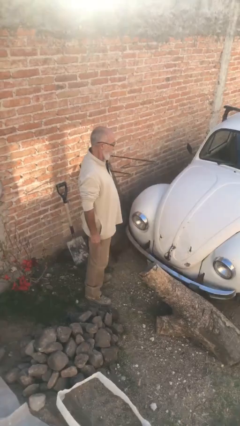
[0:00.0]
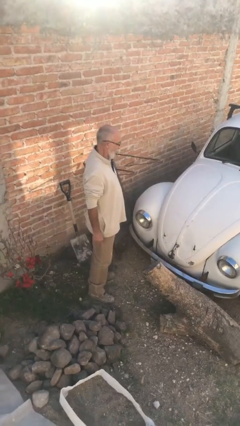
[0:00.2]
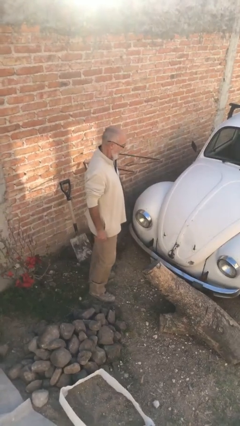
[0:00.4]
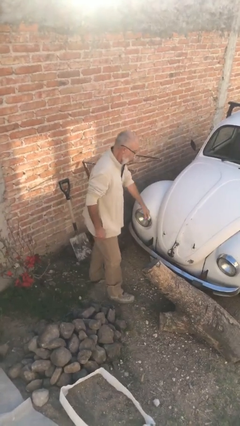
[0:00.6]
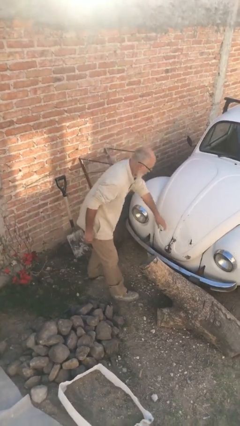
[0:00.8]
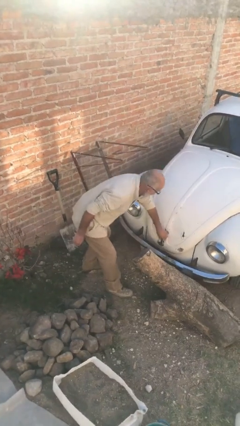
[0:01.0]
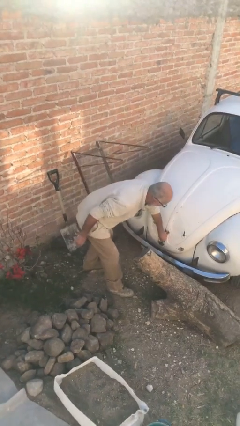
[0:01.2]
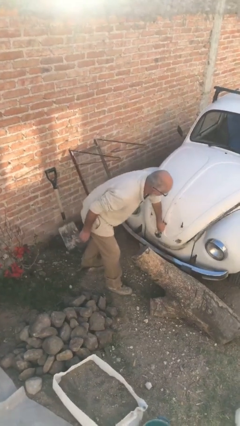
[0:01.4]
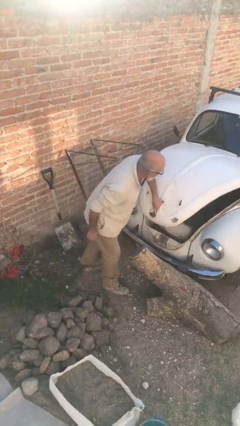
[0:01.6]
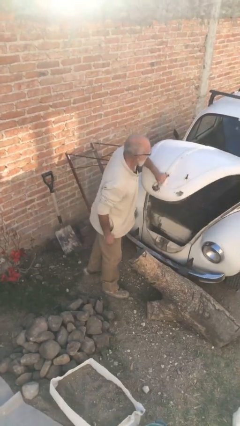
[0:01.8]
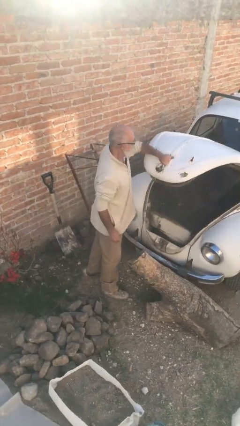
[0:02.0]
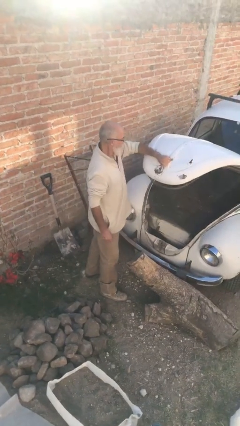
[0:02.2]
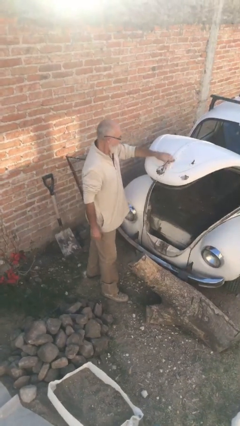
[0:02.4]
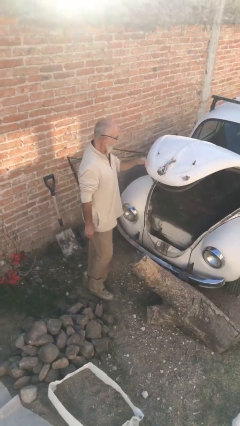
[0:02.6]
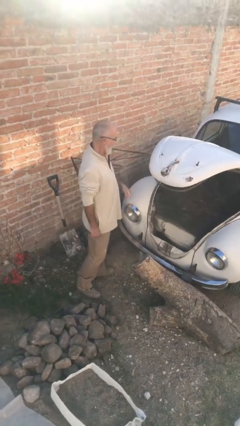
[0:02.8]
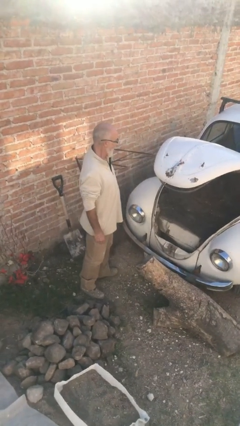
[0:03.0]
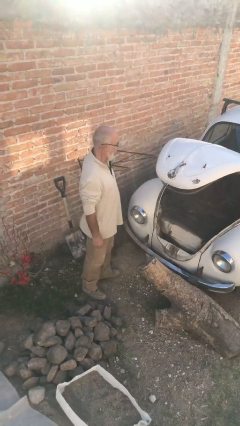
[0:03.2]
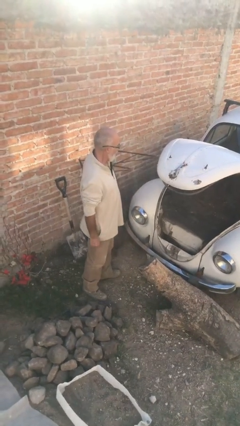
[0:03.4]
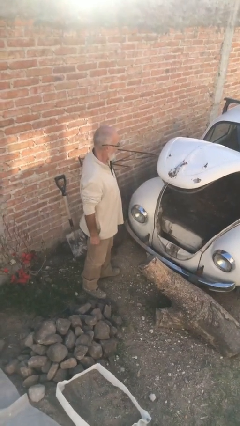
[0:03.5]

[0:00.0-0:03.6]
person opens car trunk

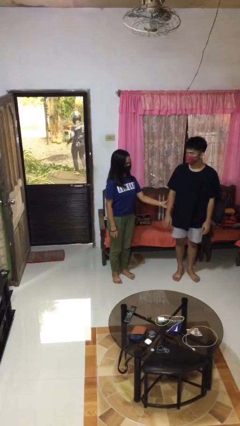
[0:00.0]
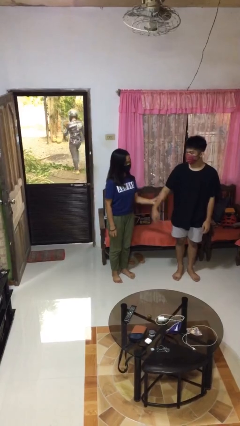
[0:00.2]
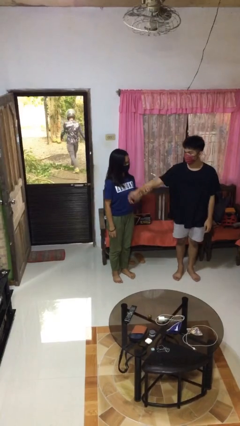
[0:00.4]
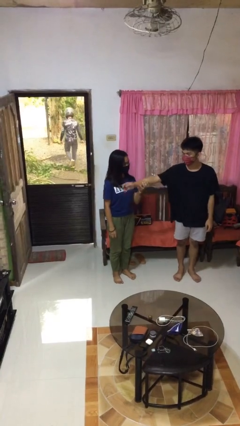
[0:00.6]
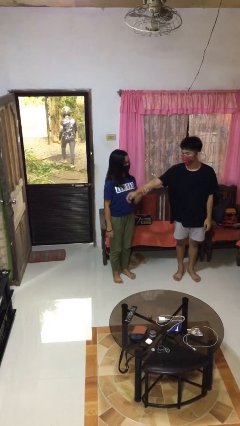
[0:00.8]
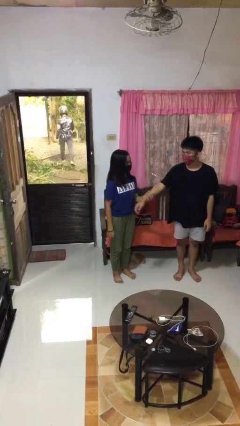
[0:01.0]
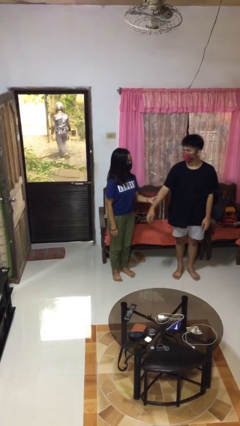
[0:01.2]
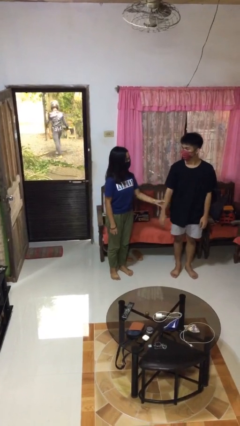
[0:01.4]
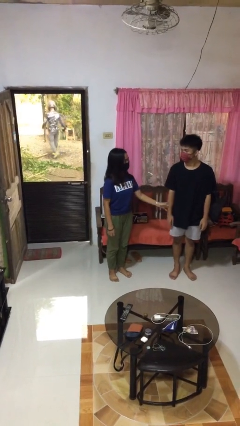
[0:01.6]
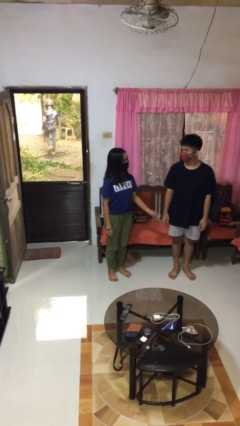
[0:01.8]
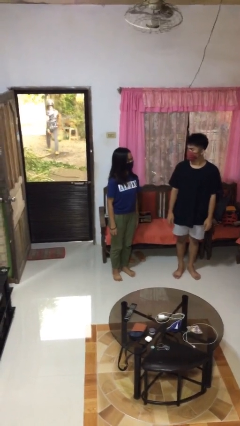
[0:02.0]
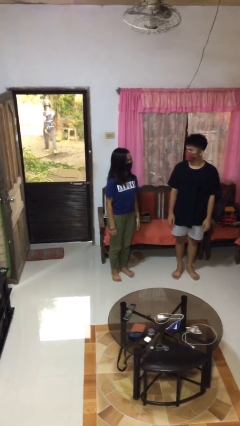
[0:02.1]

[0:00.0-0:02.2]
person grabs person by forearm

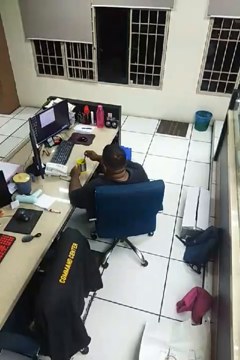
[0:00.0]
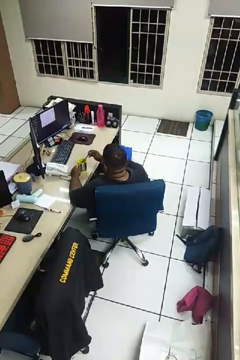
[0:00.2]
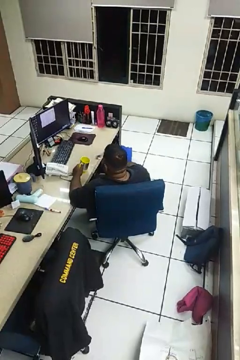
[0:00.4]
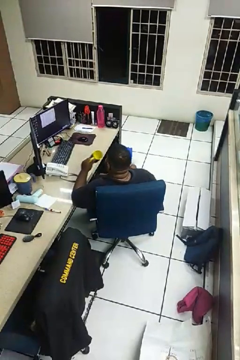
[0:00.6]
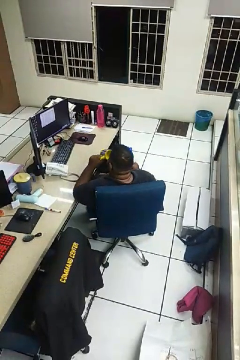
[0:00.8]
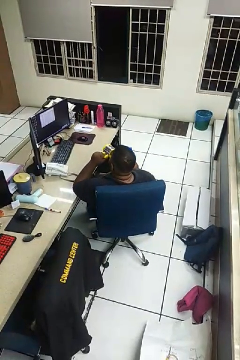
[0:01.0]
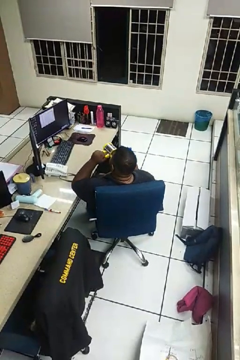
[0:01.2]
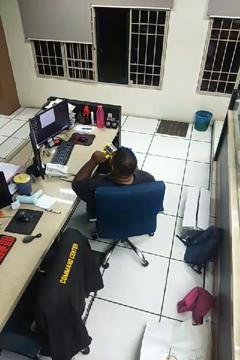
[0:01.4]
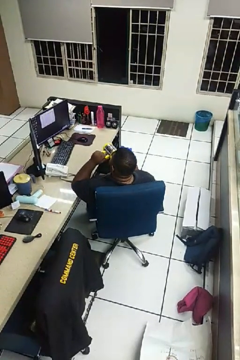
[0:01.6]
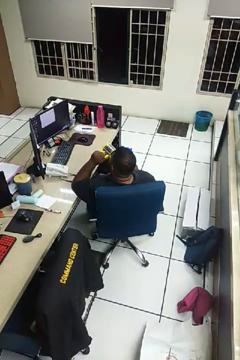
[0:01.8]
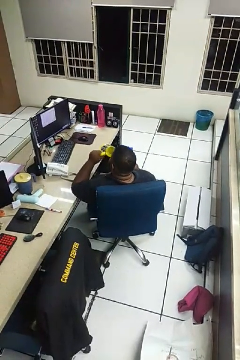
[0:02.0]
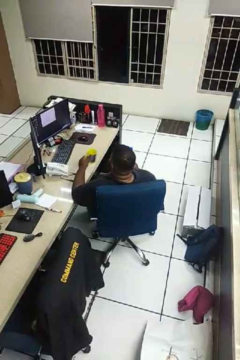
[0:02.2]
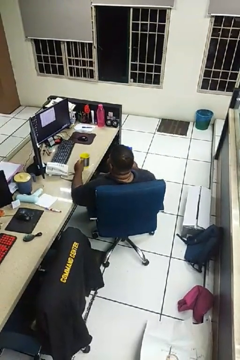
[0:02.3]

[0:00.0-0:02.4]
person drinks from mug

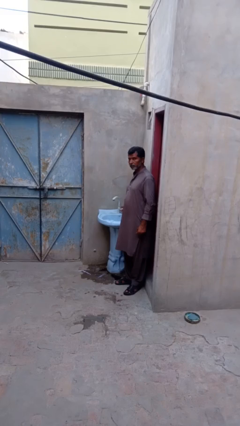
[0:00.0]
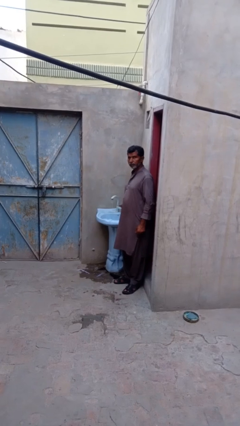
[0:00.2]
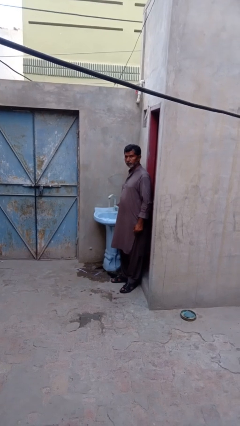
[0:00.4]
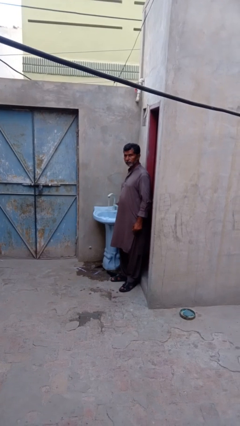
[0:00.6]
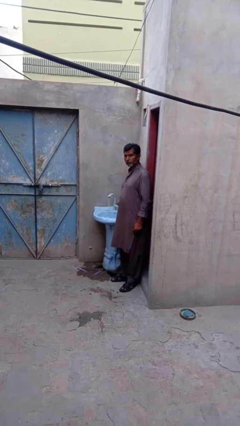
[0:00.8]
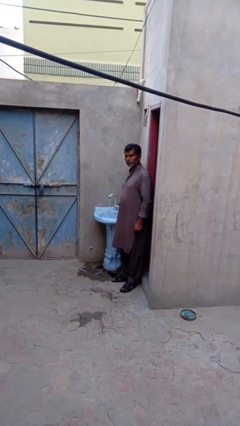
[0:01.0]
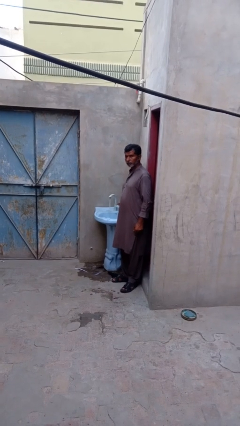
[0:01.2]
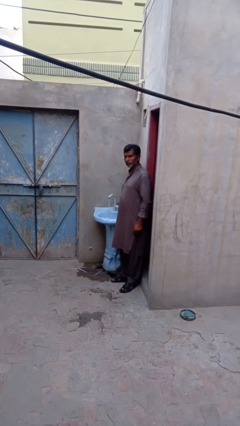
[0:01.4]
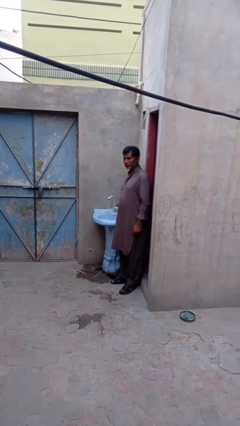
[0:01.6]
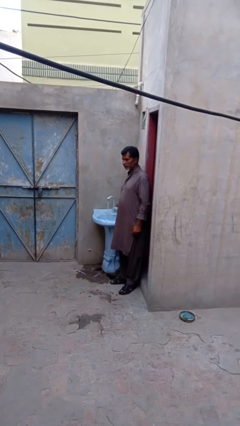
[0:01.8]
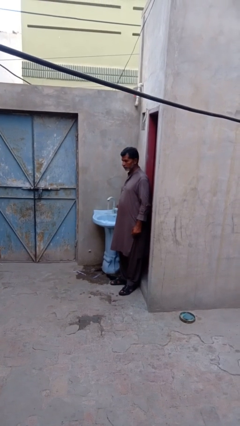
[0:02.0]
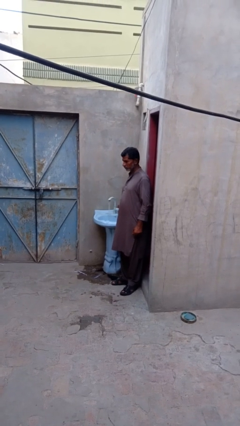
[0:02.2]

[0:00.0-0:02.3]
person turns on faucet

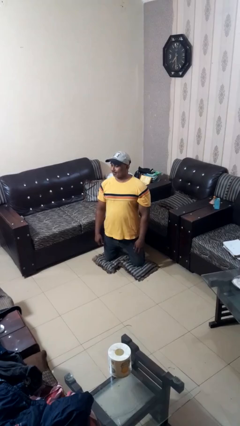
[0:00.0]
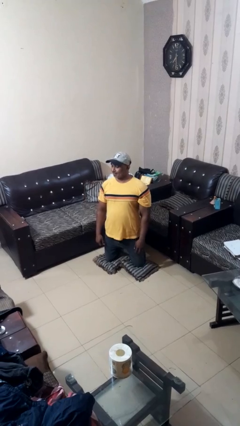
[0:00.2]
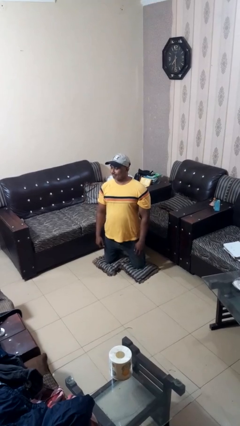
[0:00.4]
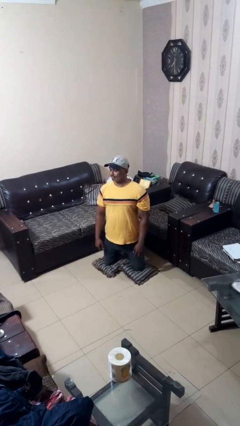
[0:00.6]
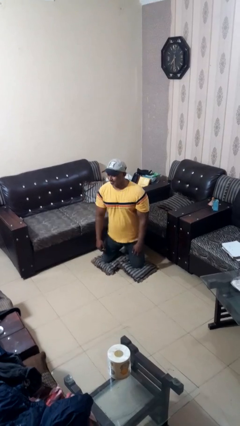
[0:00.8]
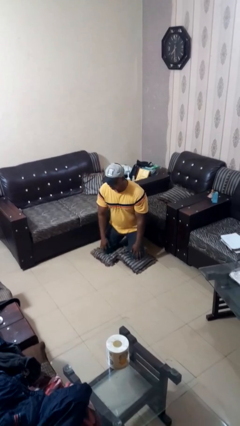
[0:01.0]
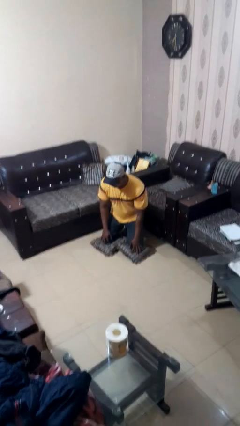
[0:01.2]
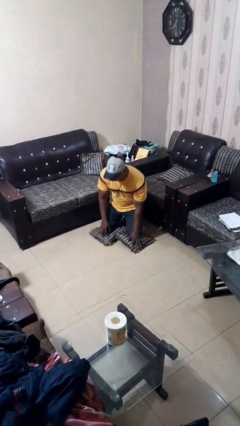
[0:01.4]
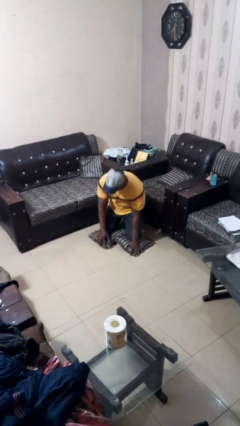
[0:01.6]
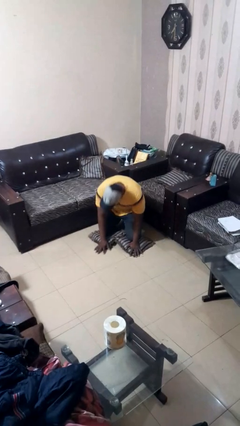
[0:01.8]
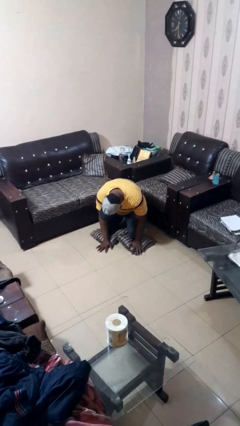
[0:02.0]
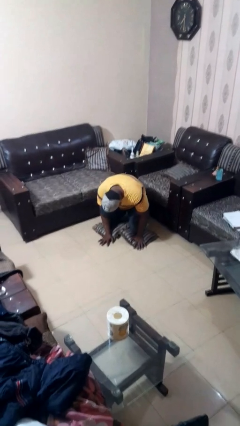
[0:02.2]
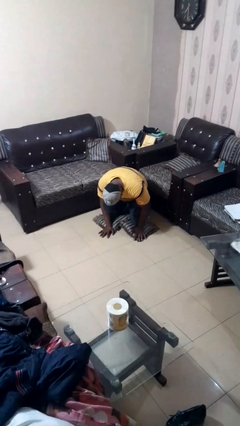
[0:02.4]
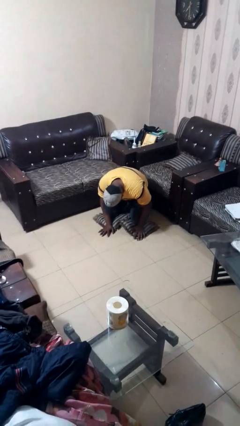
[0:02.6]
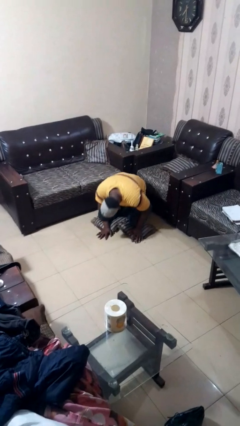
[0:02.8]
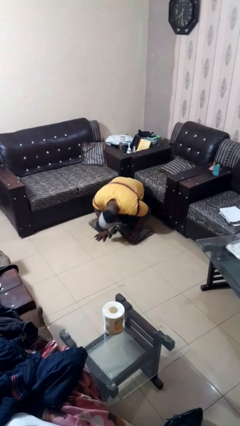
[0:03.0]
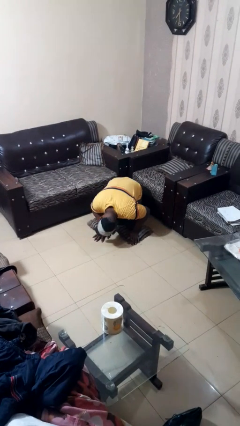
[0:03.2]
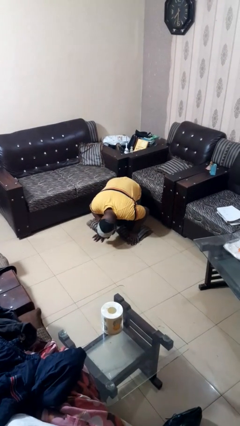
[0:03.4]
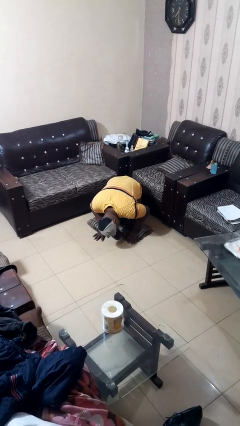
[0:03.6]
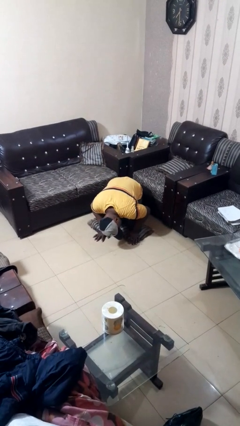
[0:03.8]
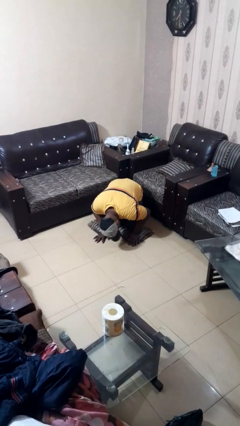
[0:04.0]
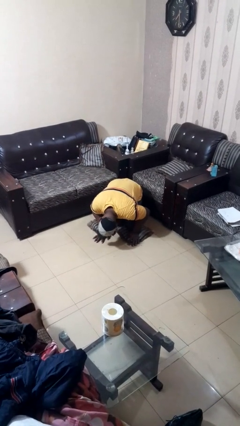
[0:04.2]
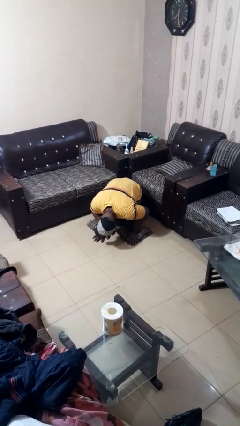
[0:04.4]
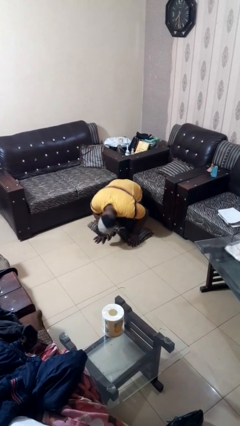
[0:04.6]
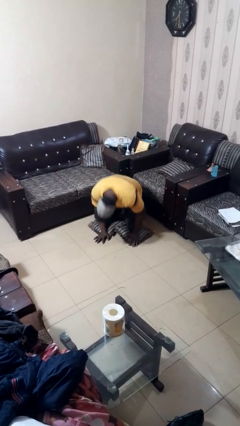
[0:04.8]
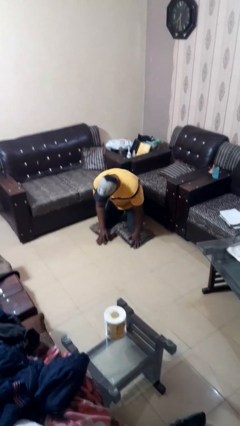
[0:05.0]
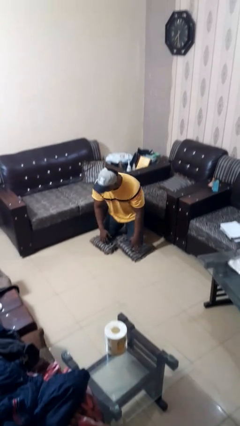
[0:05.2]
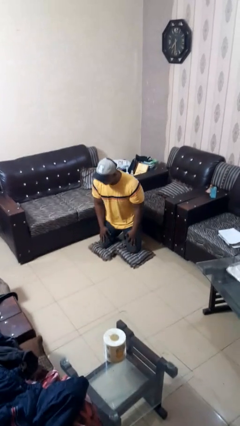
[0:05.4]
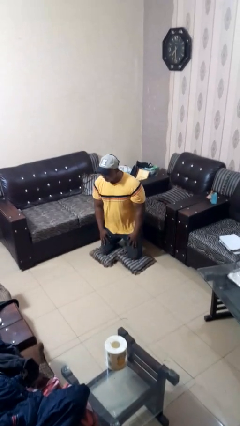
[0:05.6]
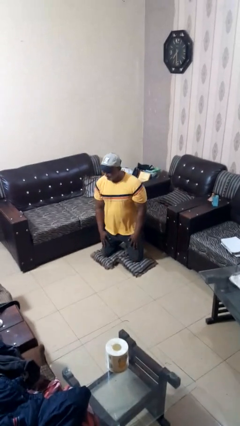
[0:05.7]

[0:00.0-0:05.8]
person searches under couch

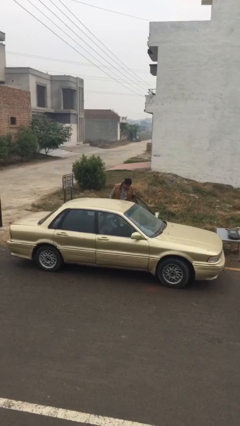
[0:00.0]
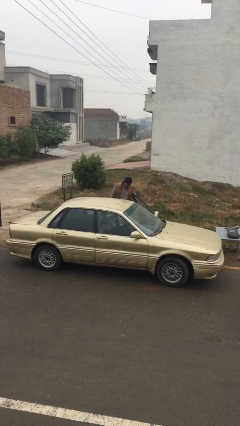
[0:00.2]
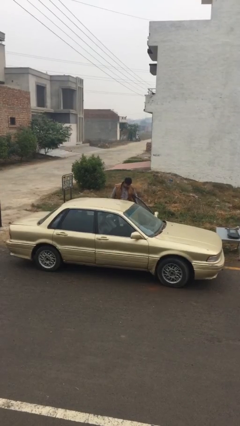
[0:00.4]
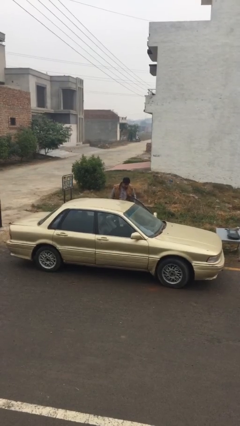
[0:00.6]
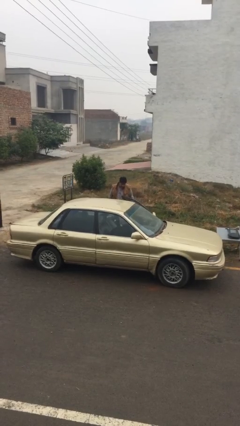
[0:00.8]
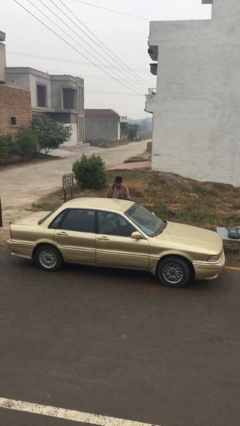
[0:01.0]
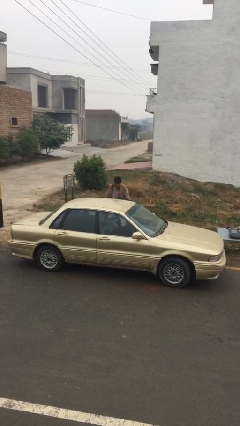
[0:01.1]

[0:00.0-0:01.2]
person closes car door

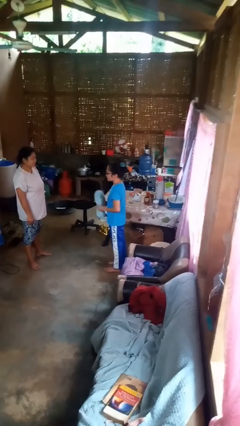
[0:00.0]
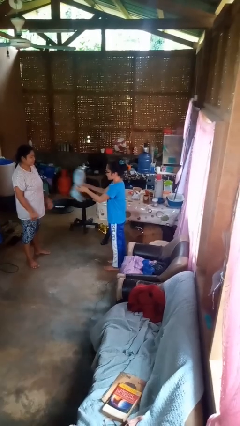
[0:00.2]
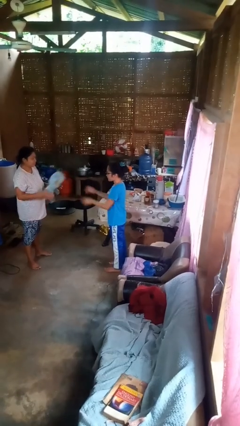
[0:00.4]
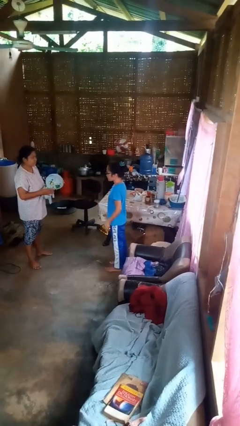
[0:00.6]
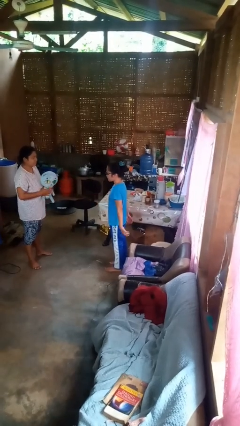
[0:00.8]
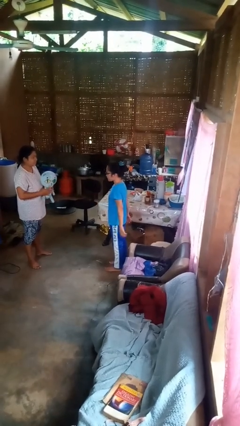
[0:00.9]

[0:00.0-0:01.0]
person throws object to person
